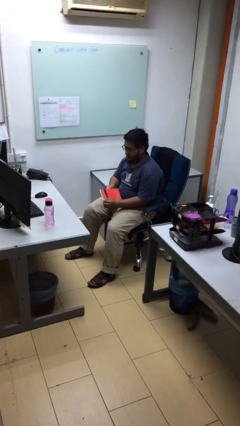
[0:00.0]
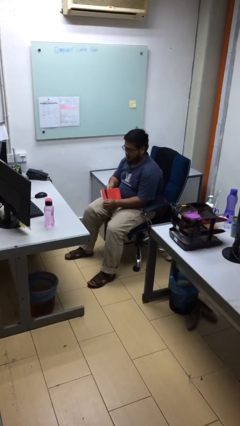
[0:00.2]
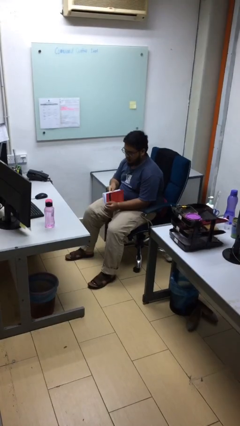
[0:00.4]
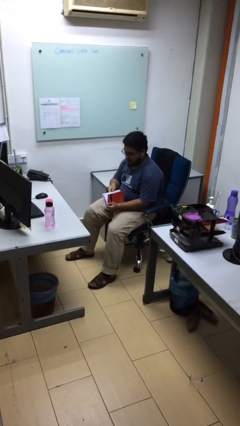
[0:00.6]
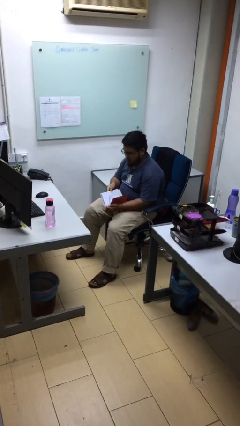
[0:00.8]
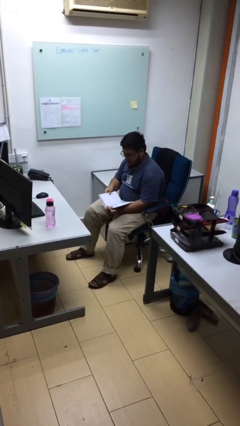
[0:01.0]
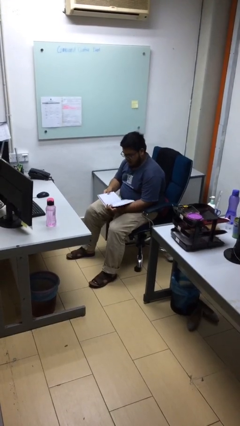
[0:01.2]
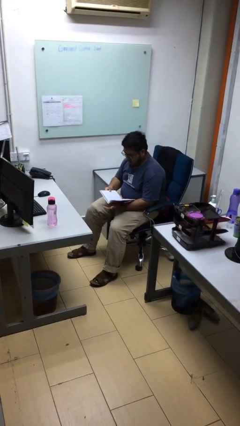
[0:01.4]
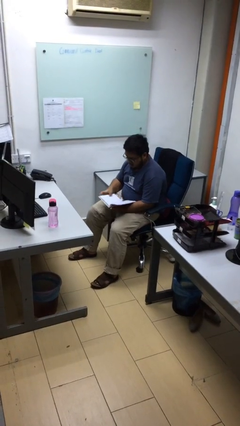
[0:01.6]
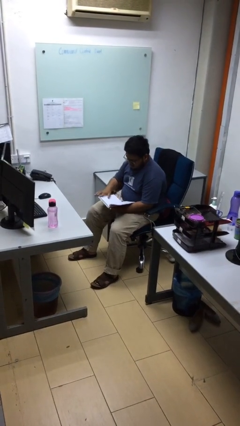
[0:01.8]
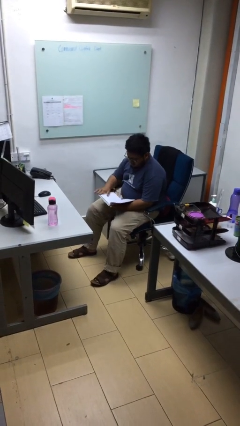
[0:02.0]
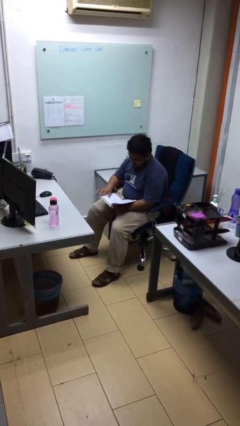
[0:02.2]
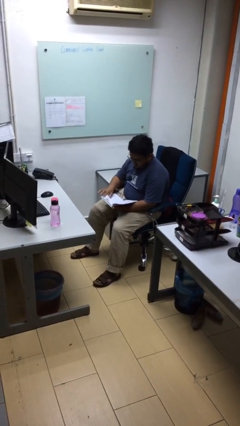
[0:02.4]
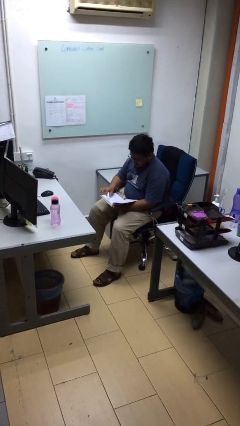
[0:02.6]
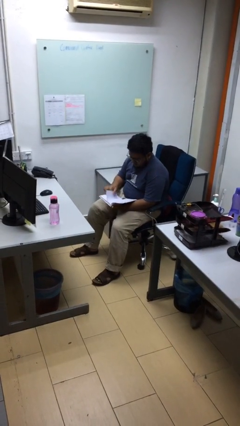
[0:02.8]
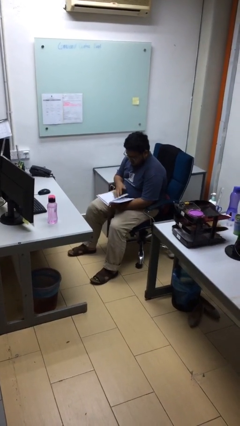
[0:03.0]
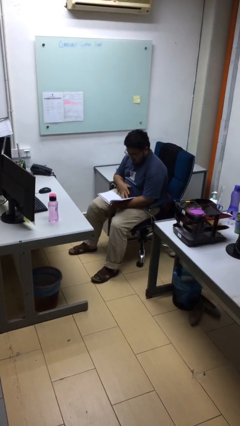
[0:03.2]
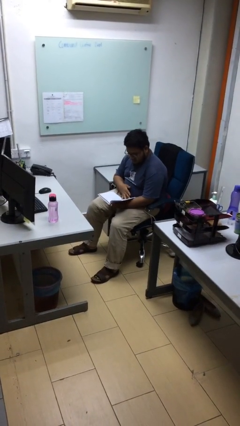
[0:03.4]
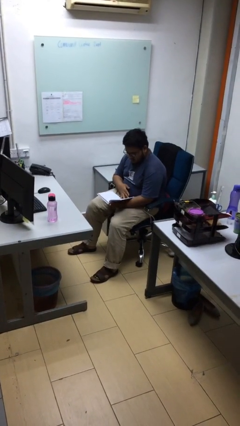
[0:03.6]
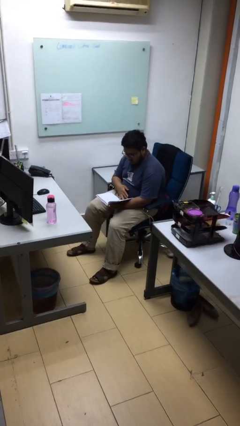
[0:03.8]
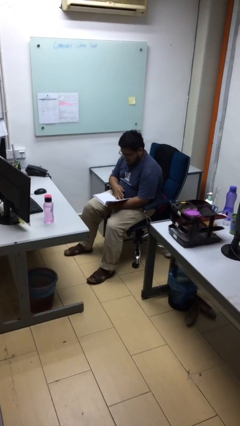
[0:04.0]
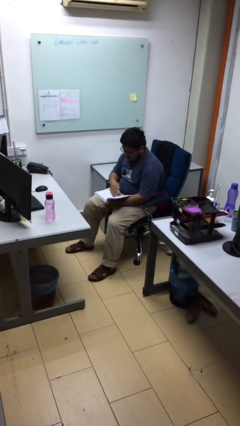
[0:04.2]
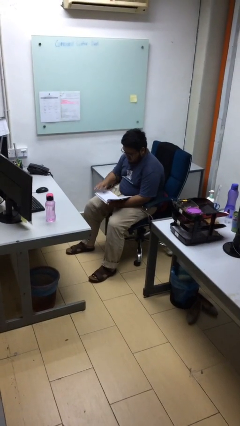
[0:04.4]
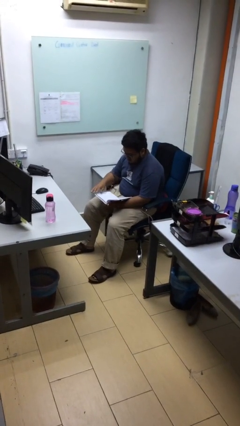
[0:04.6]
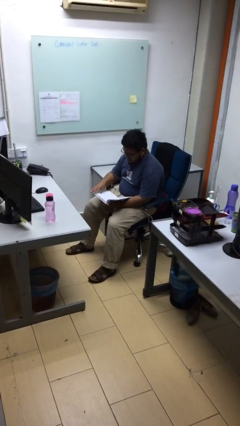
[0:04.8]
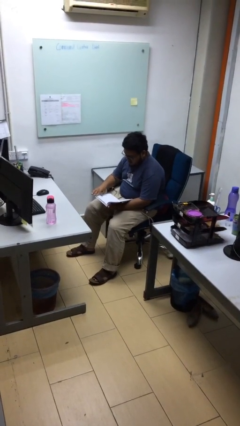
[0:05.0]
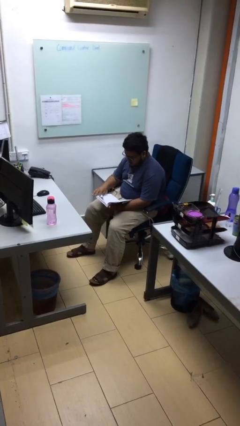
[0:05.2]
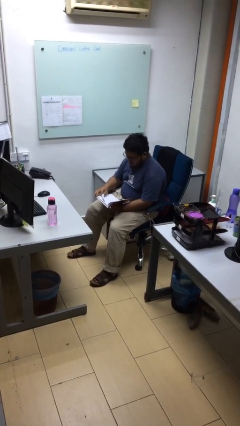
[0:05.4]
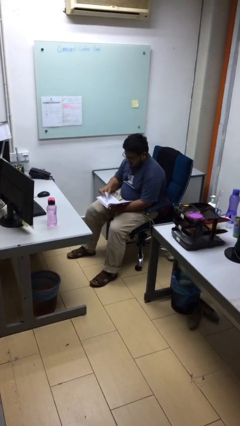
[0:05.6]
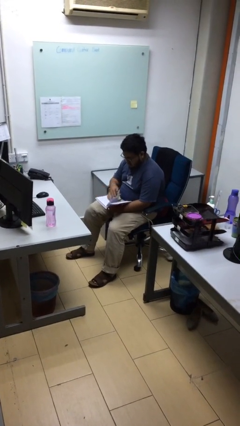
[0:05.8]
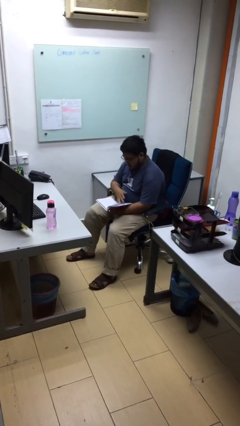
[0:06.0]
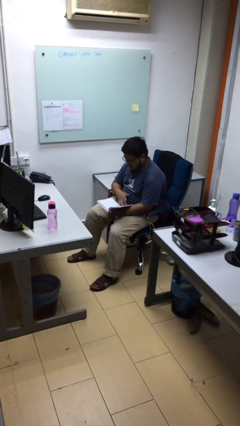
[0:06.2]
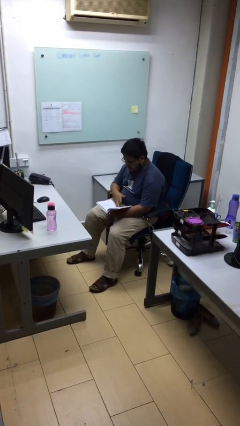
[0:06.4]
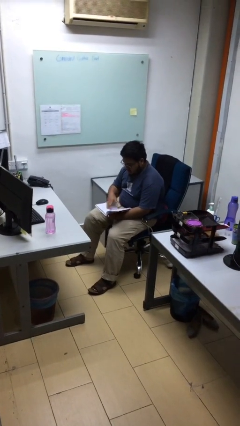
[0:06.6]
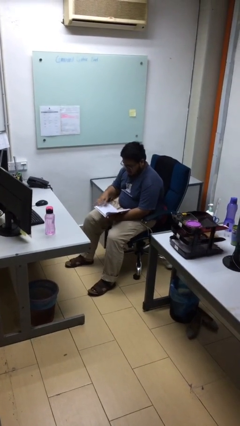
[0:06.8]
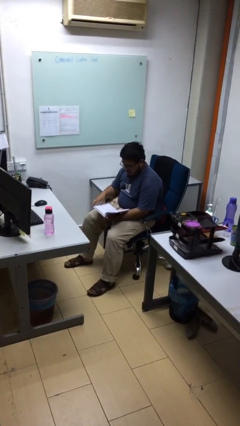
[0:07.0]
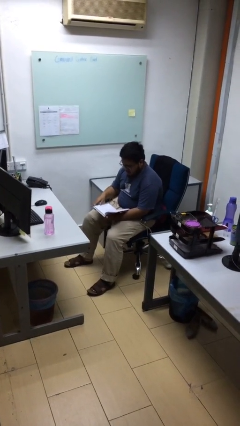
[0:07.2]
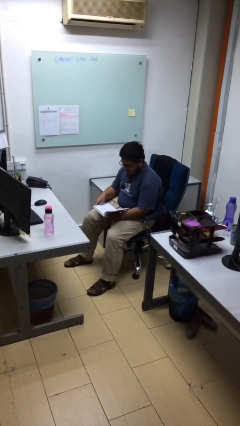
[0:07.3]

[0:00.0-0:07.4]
person reads document

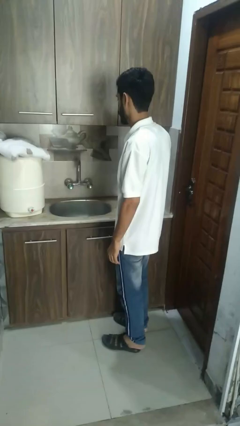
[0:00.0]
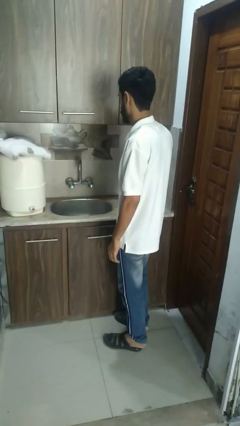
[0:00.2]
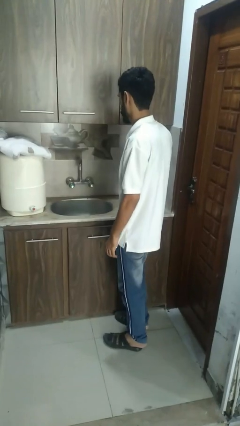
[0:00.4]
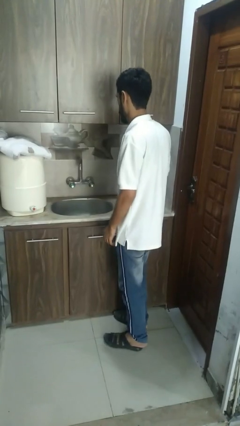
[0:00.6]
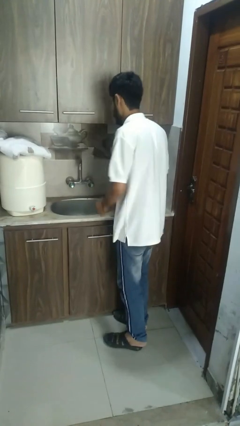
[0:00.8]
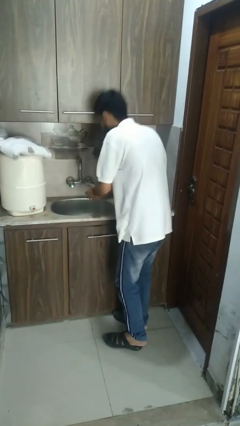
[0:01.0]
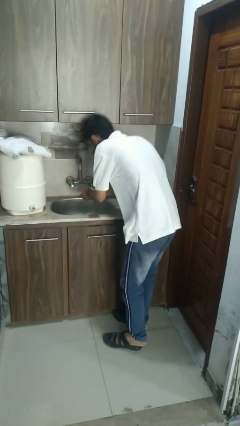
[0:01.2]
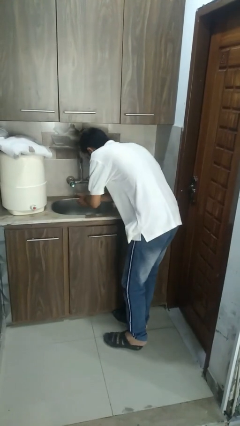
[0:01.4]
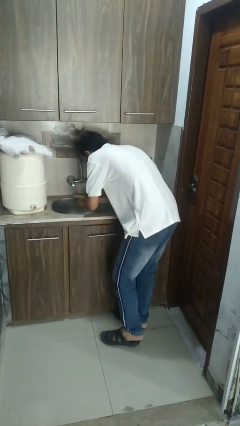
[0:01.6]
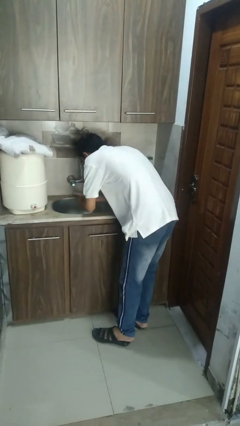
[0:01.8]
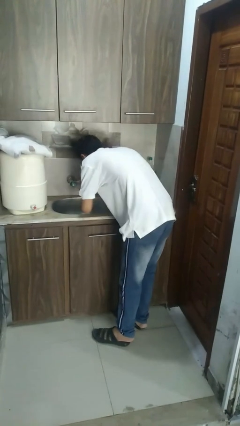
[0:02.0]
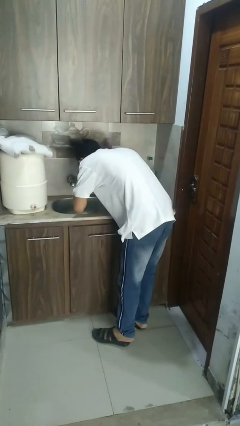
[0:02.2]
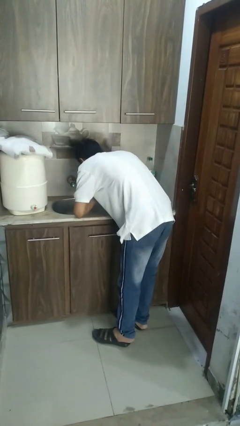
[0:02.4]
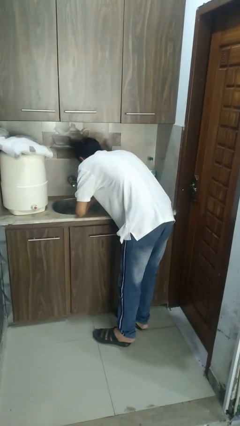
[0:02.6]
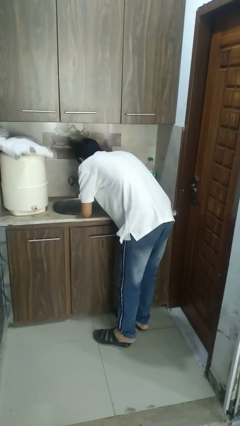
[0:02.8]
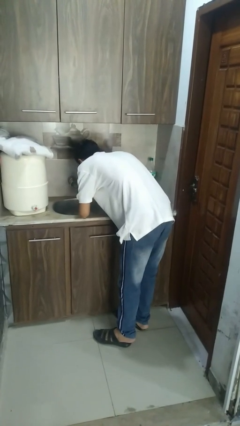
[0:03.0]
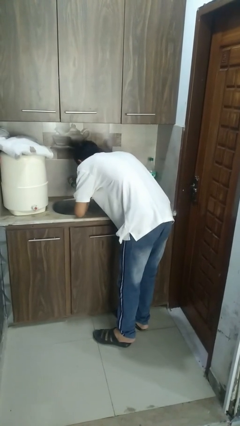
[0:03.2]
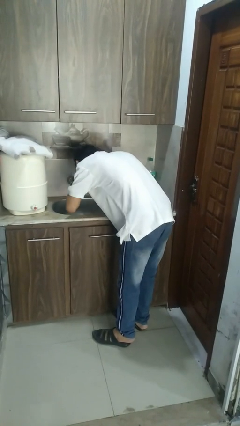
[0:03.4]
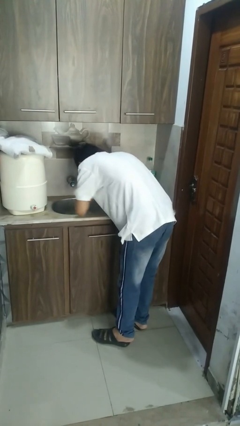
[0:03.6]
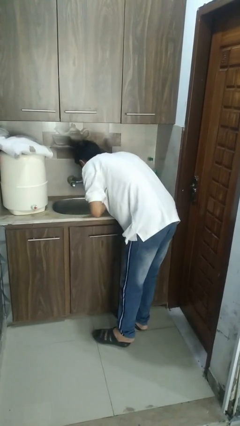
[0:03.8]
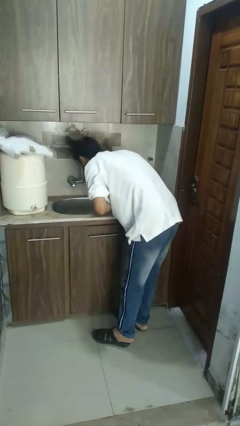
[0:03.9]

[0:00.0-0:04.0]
person washes face

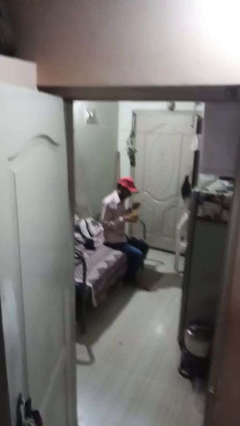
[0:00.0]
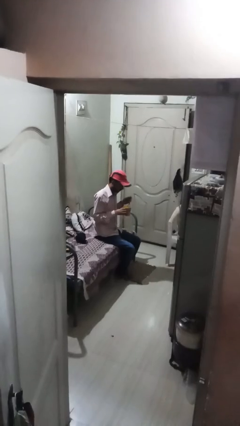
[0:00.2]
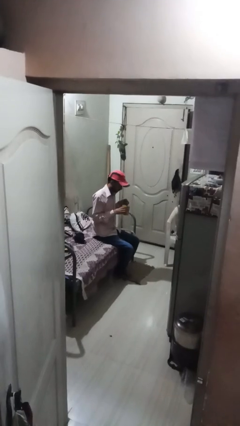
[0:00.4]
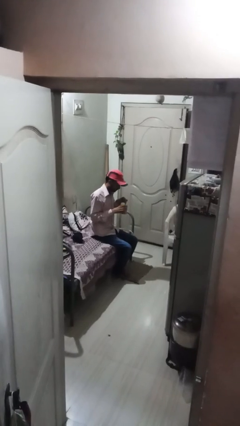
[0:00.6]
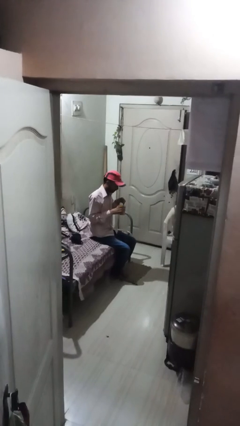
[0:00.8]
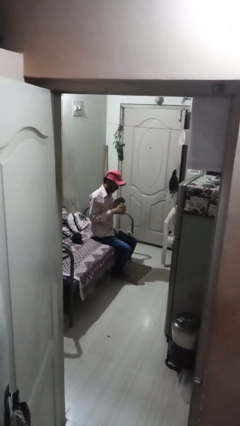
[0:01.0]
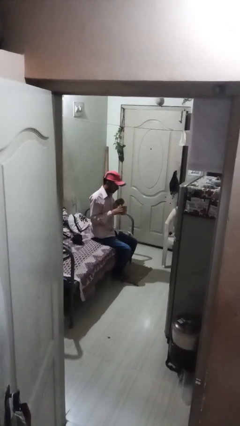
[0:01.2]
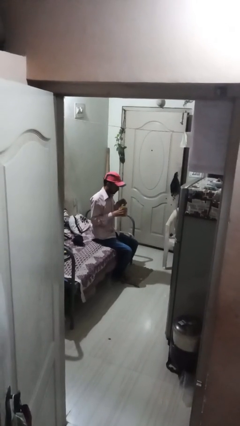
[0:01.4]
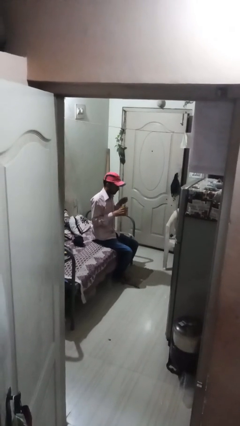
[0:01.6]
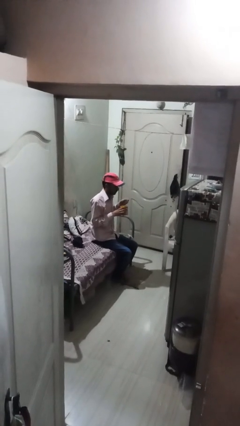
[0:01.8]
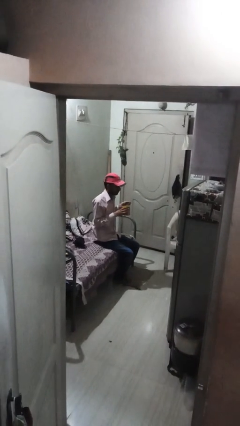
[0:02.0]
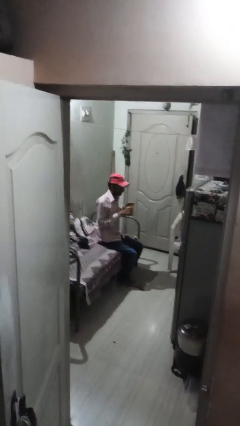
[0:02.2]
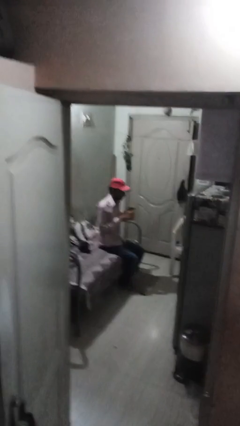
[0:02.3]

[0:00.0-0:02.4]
person stirs mug

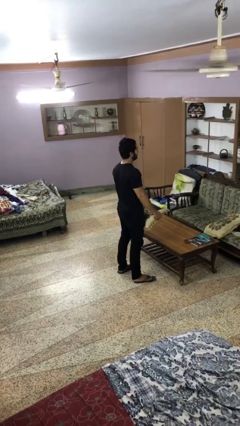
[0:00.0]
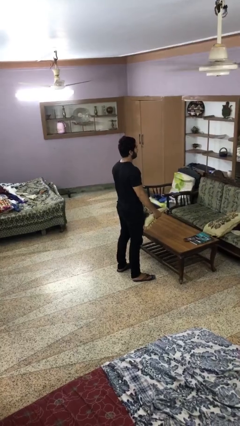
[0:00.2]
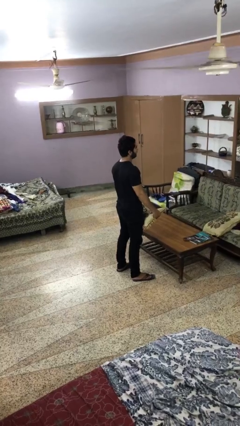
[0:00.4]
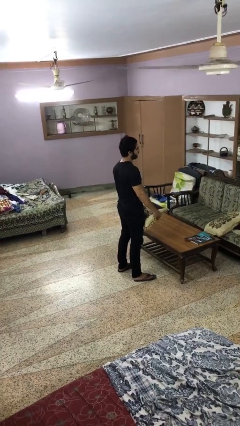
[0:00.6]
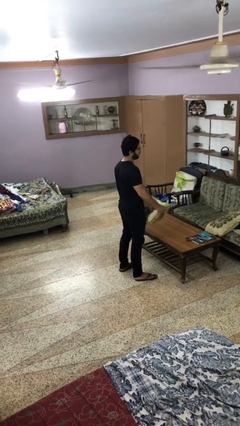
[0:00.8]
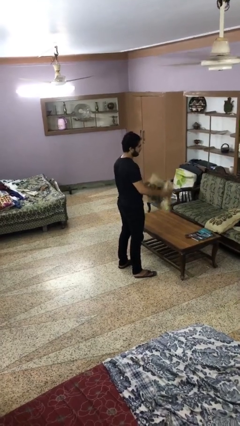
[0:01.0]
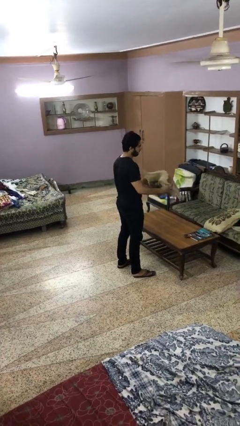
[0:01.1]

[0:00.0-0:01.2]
person squeezes object

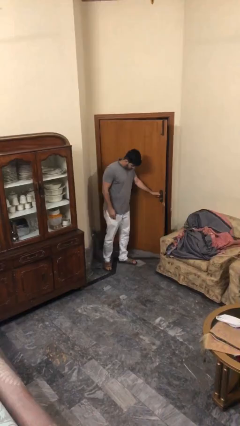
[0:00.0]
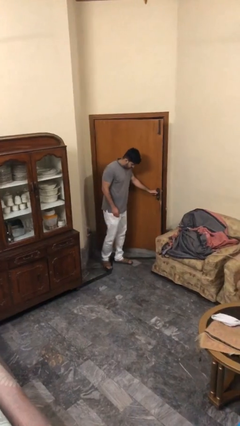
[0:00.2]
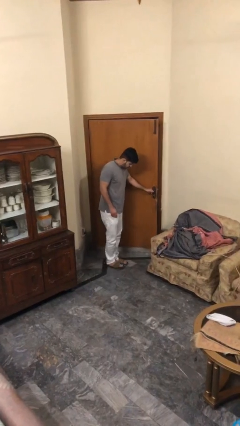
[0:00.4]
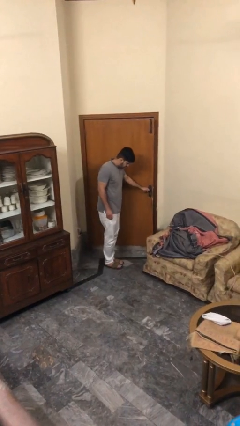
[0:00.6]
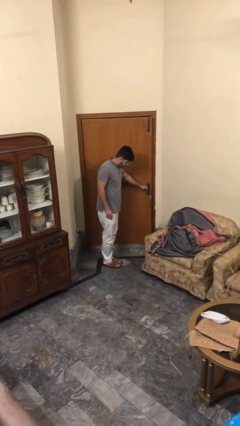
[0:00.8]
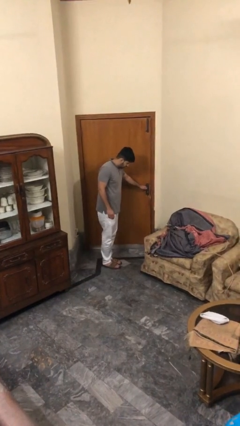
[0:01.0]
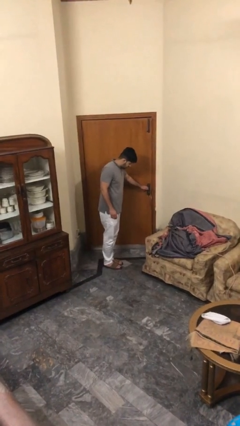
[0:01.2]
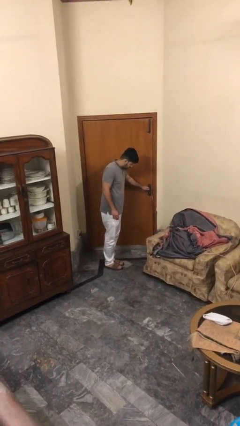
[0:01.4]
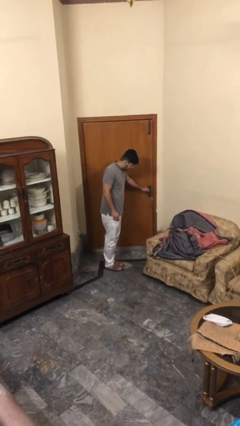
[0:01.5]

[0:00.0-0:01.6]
person closes facility door

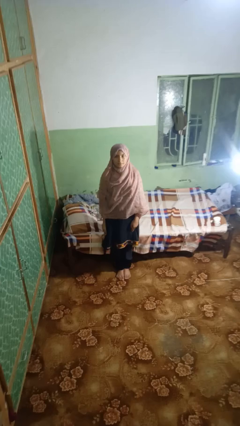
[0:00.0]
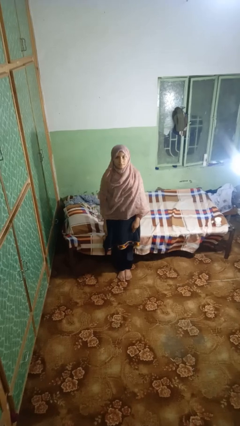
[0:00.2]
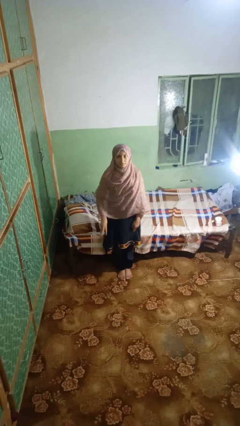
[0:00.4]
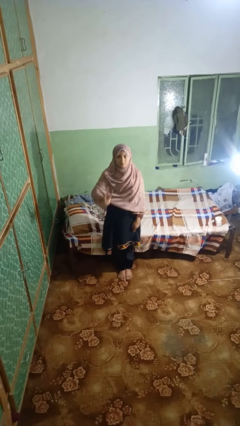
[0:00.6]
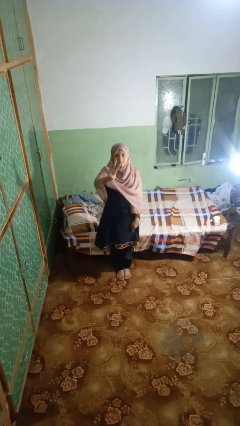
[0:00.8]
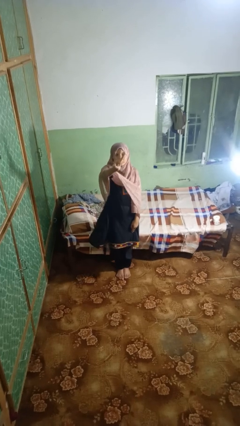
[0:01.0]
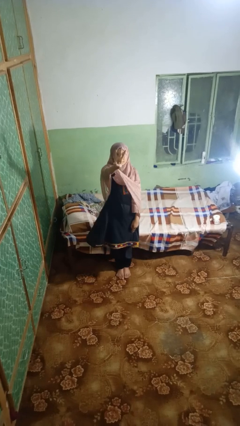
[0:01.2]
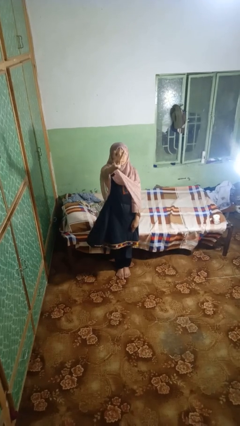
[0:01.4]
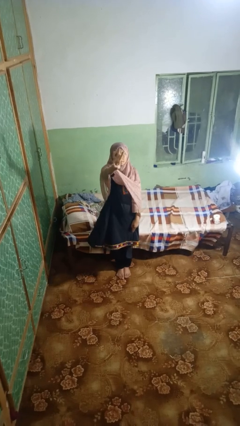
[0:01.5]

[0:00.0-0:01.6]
person gestures number three
